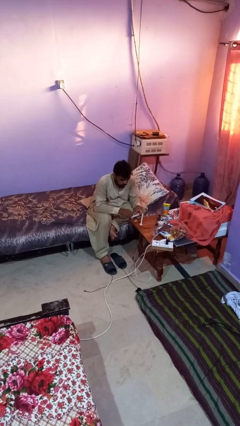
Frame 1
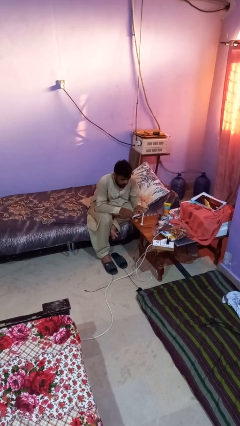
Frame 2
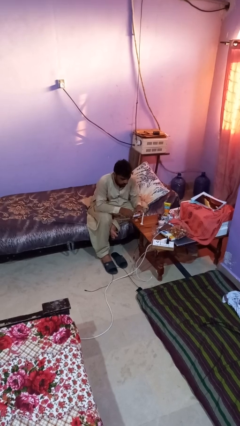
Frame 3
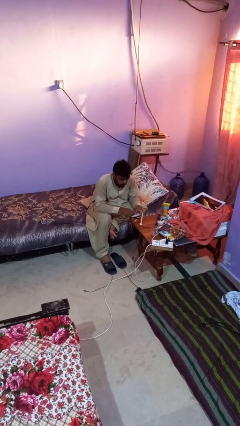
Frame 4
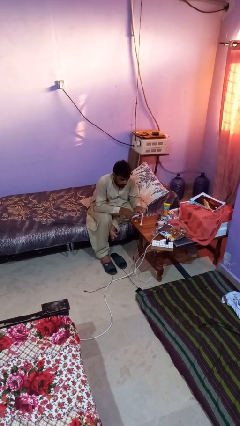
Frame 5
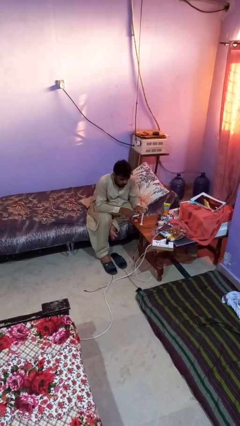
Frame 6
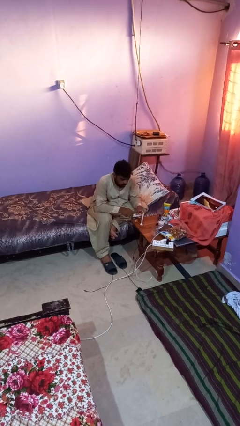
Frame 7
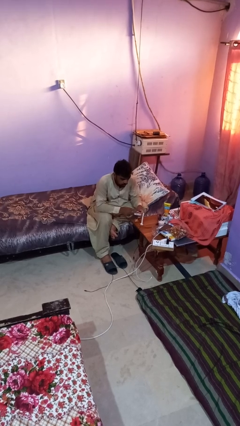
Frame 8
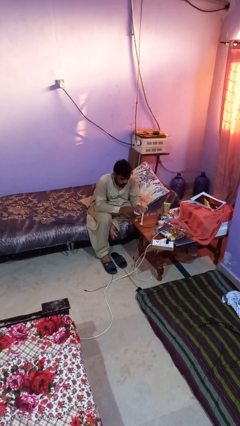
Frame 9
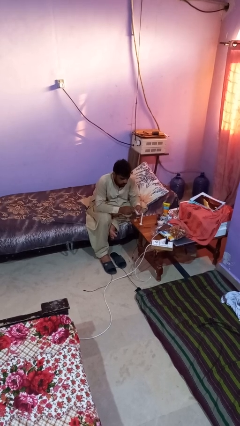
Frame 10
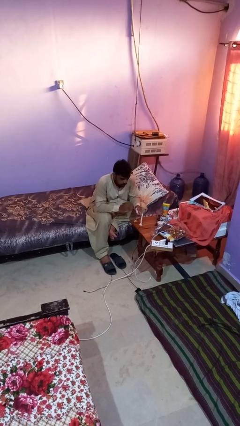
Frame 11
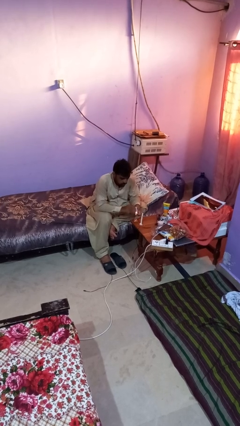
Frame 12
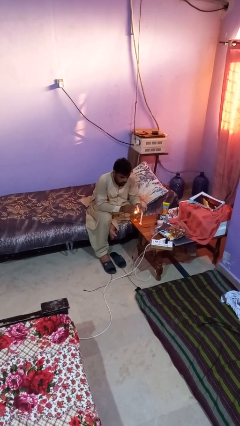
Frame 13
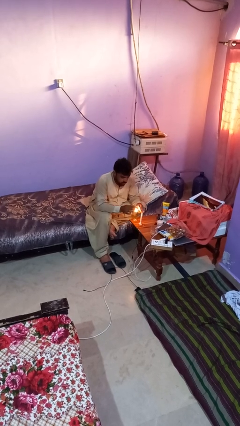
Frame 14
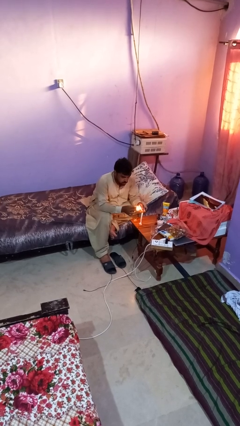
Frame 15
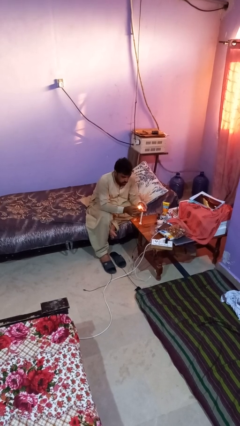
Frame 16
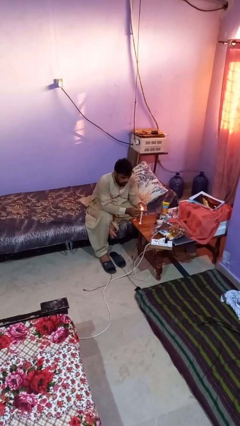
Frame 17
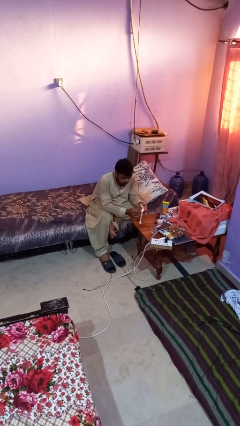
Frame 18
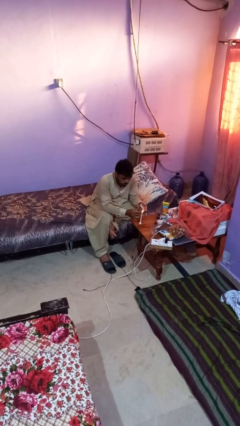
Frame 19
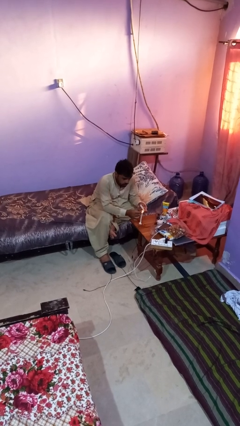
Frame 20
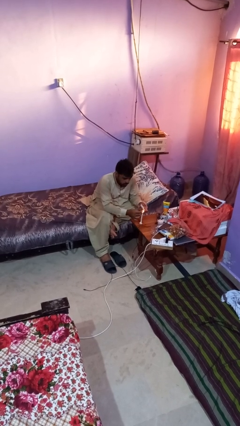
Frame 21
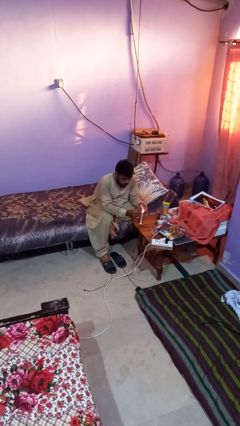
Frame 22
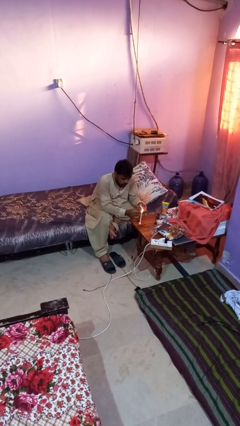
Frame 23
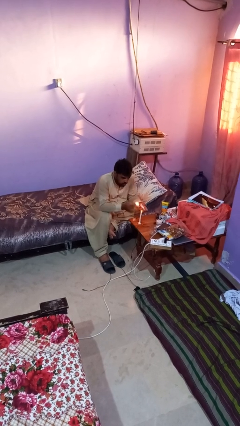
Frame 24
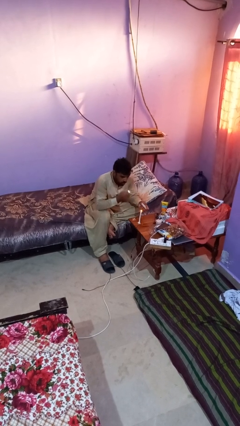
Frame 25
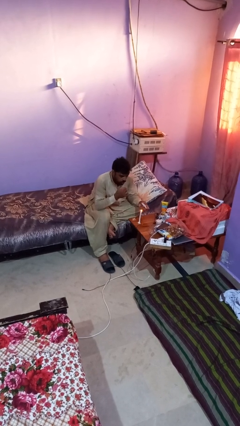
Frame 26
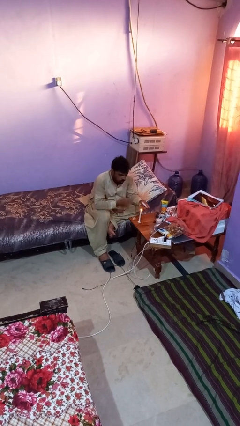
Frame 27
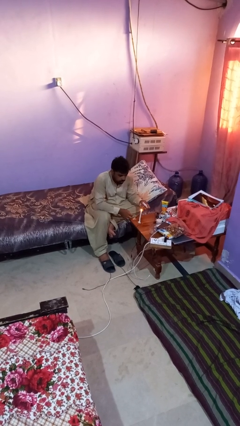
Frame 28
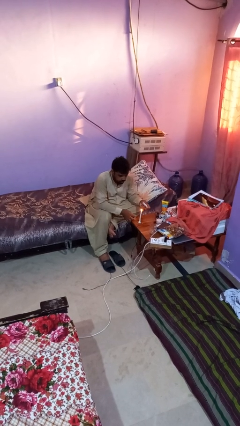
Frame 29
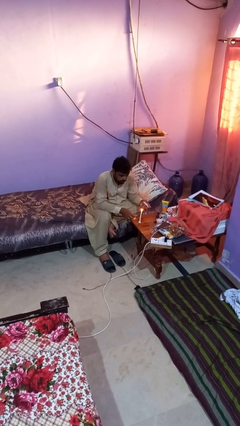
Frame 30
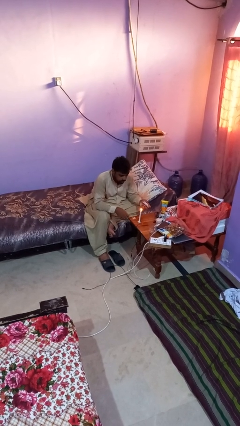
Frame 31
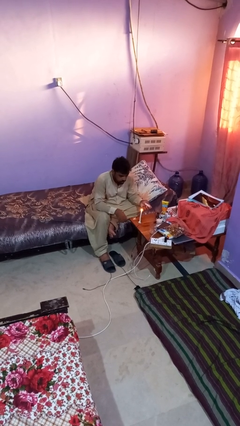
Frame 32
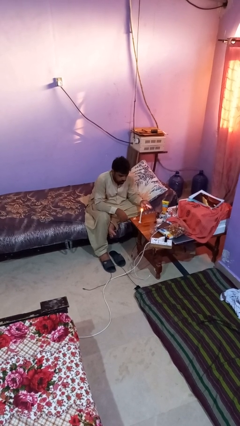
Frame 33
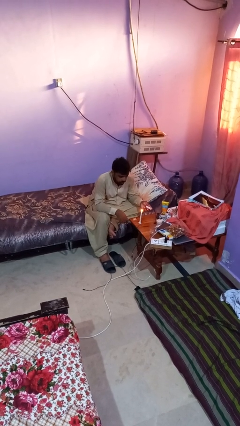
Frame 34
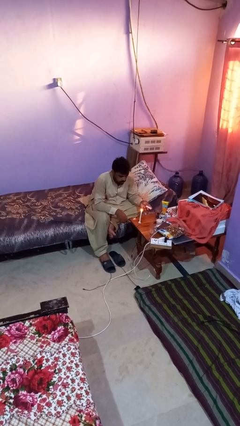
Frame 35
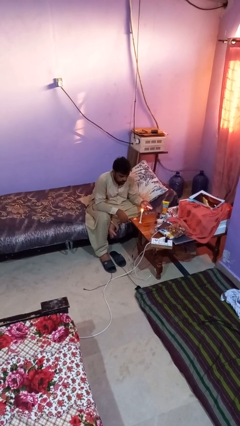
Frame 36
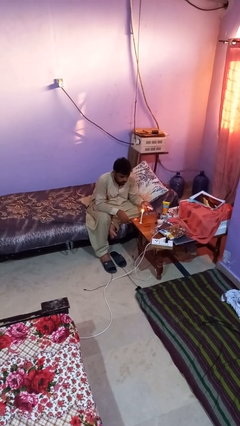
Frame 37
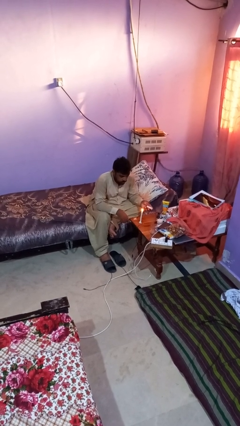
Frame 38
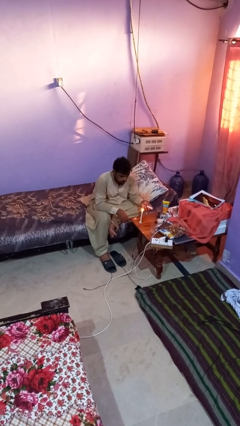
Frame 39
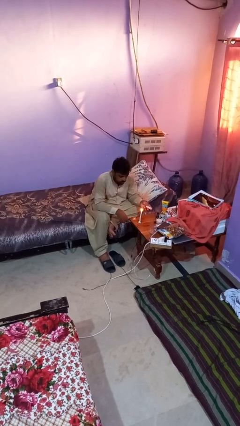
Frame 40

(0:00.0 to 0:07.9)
person lights candle

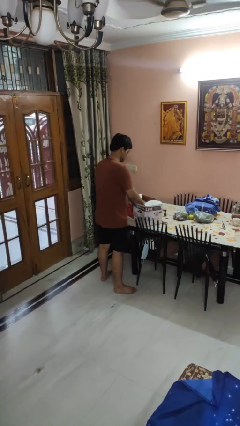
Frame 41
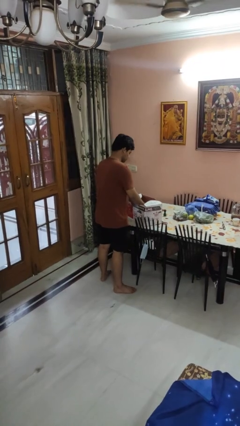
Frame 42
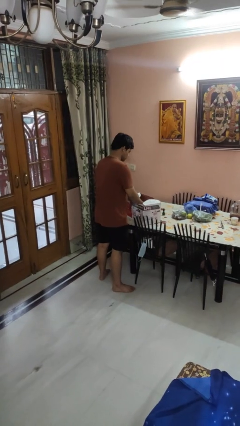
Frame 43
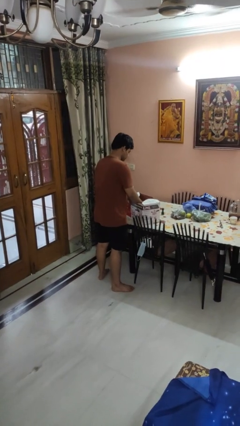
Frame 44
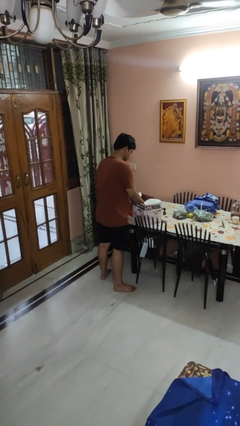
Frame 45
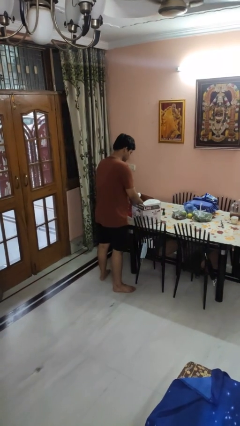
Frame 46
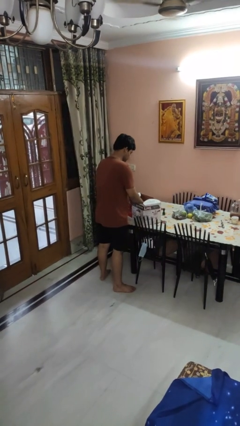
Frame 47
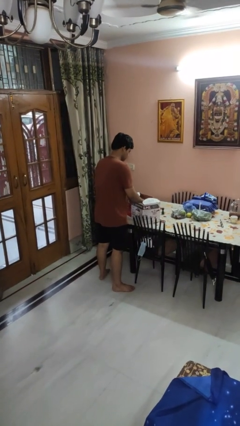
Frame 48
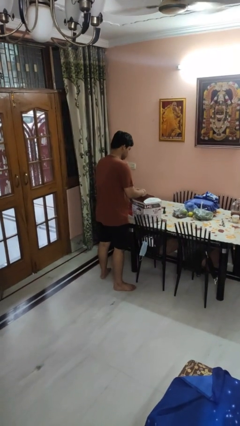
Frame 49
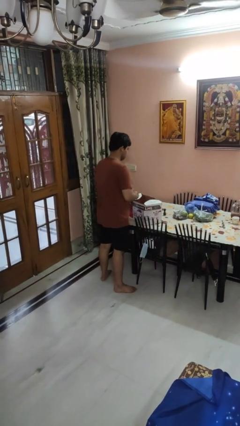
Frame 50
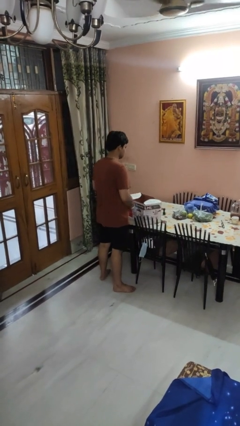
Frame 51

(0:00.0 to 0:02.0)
person searches in box

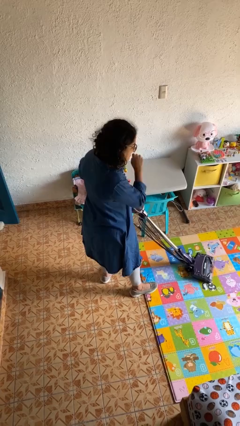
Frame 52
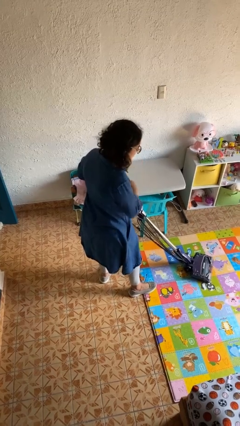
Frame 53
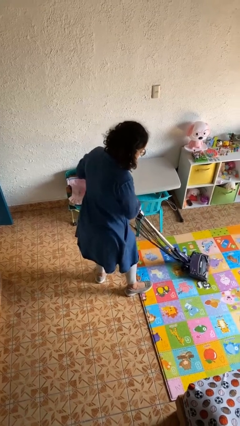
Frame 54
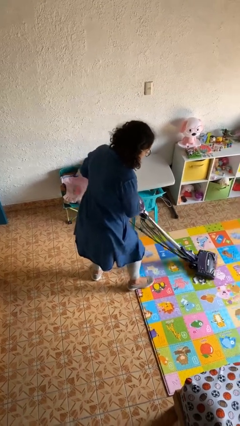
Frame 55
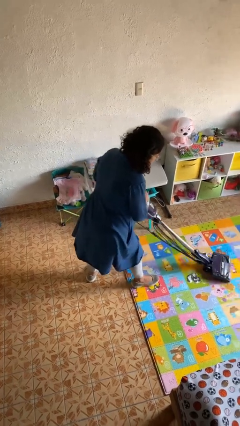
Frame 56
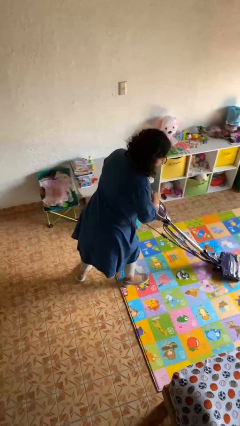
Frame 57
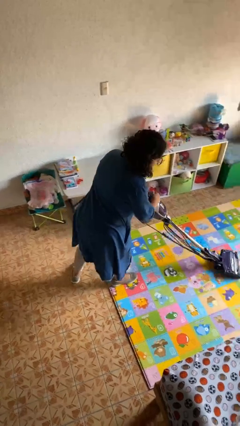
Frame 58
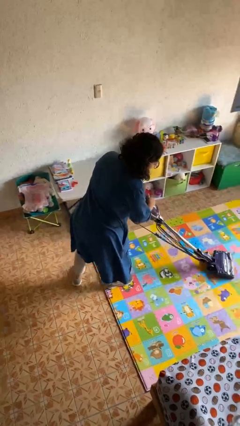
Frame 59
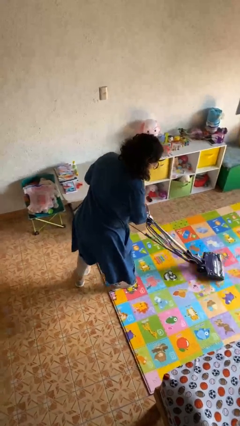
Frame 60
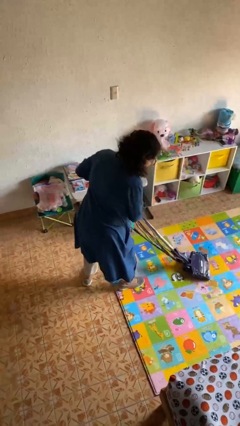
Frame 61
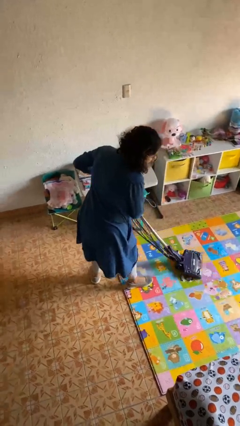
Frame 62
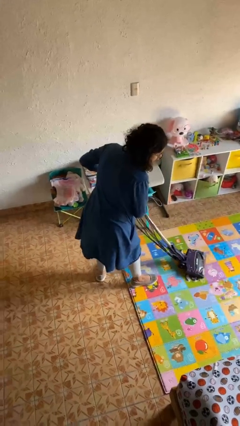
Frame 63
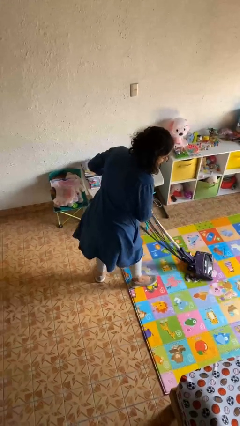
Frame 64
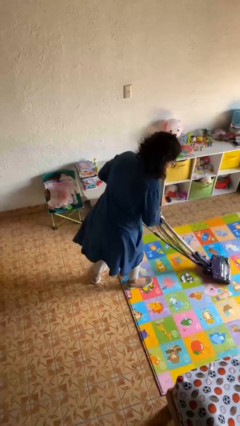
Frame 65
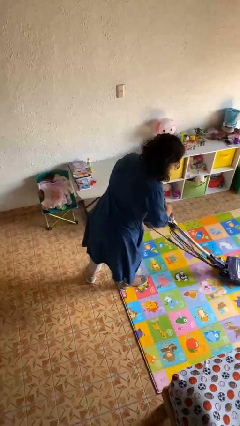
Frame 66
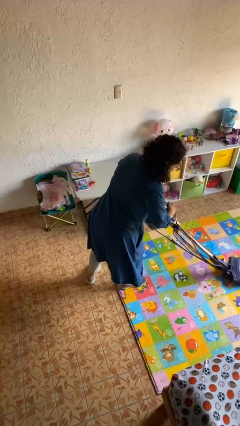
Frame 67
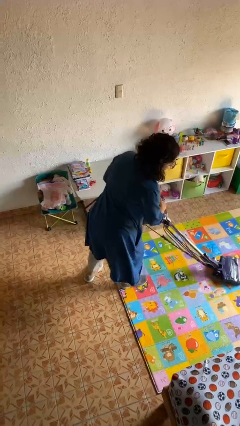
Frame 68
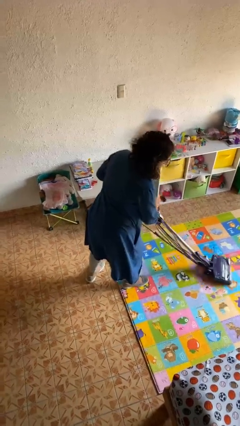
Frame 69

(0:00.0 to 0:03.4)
person vacuums carpet

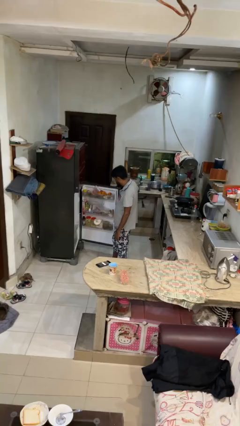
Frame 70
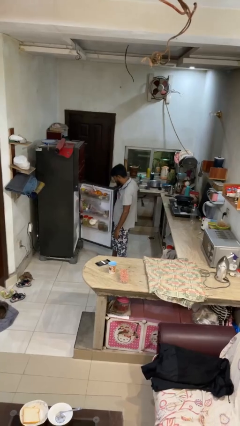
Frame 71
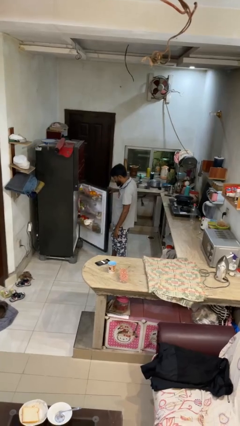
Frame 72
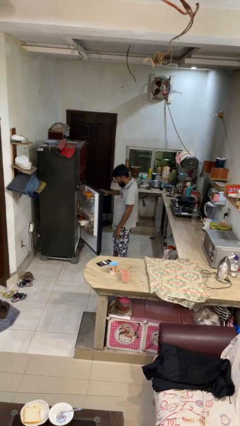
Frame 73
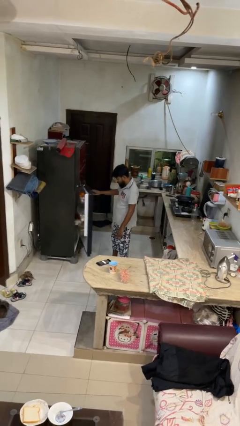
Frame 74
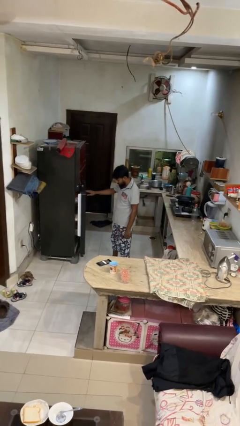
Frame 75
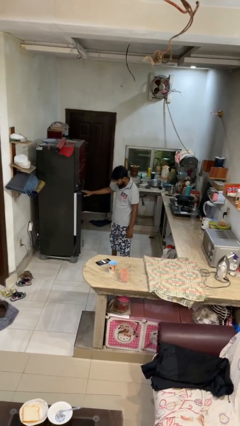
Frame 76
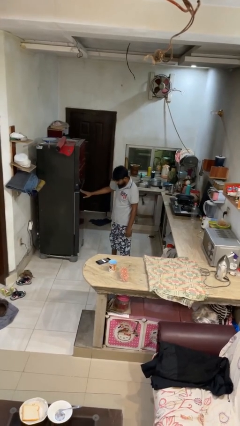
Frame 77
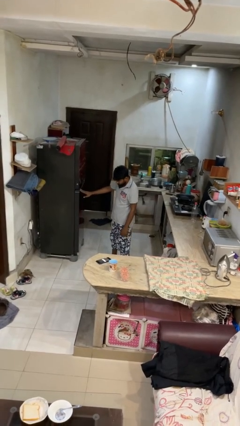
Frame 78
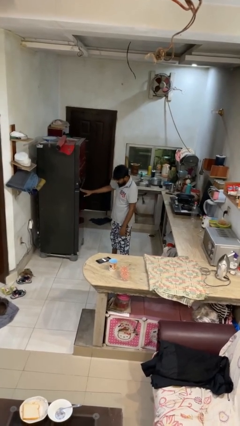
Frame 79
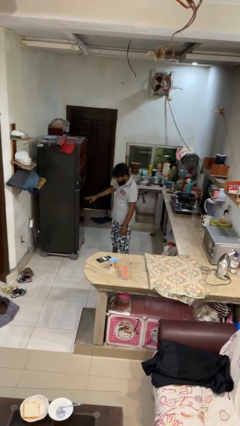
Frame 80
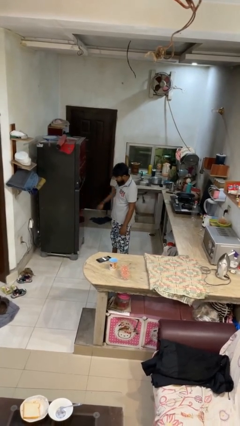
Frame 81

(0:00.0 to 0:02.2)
person closes refrigerator

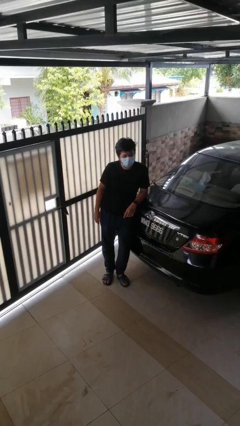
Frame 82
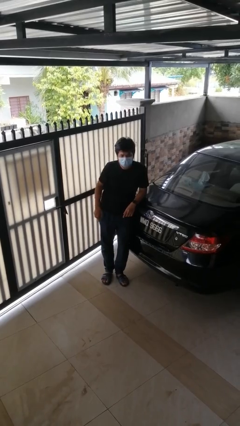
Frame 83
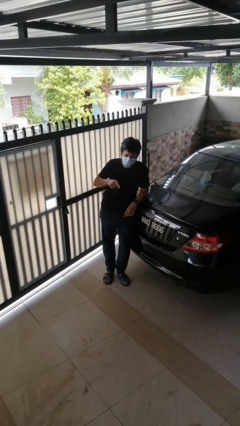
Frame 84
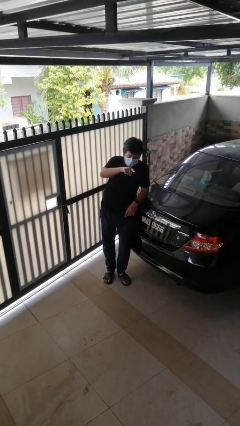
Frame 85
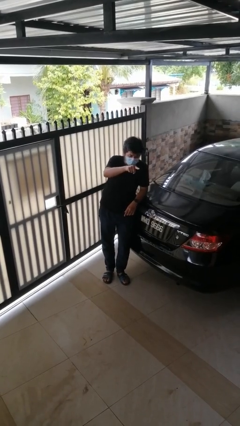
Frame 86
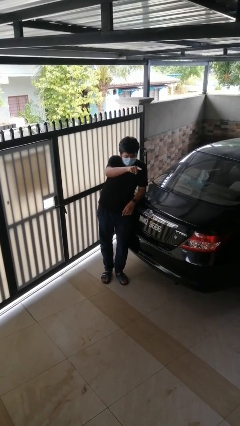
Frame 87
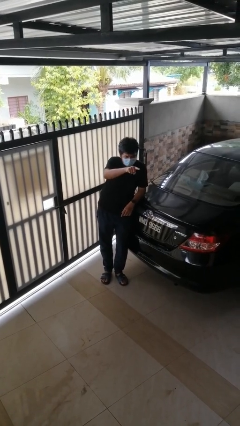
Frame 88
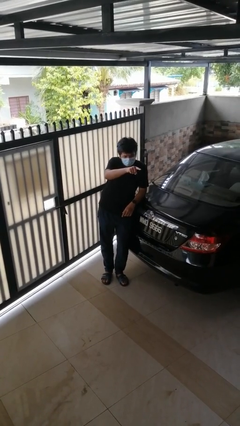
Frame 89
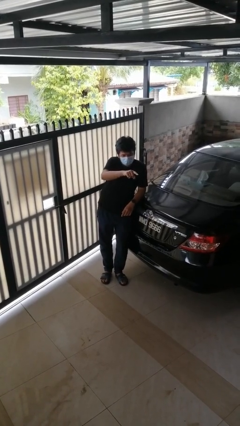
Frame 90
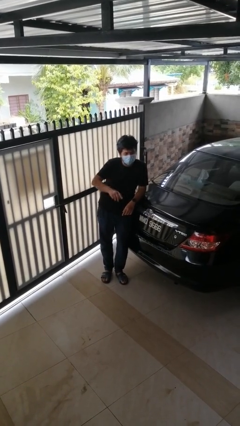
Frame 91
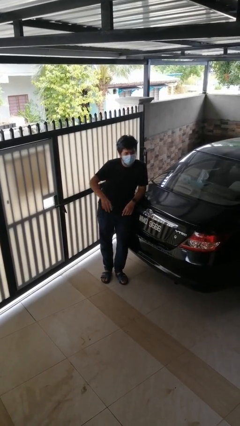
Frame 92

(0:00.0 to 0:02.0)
person points at person

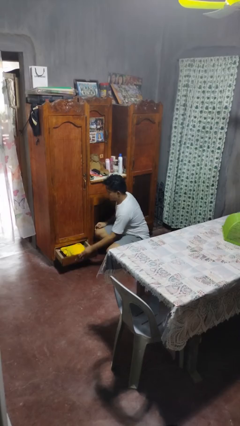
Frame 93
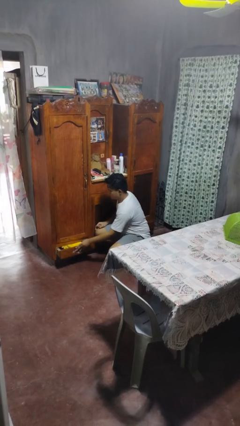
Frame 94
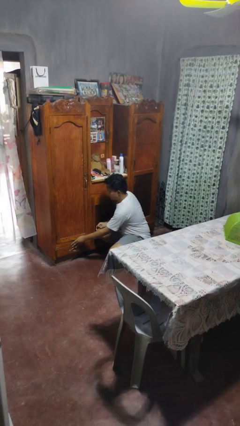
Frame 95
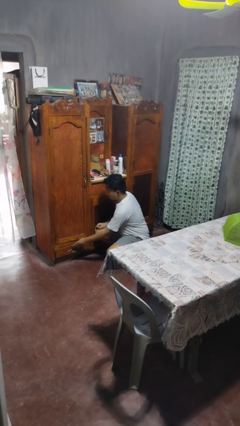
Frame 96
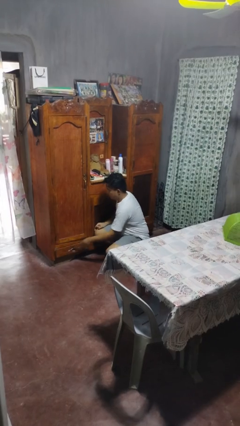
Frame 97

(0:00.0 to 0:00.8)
person closes dresser drawer
